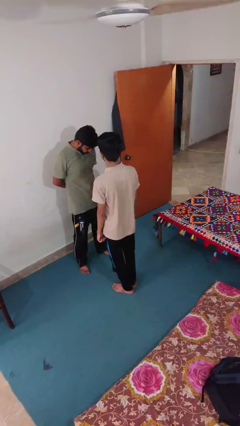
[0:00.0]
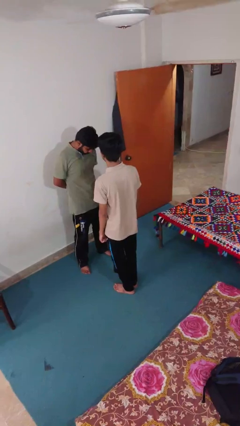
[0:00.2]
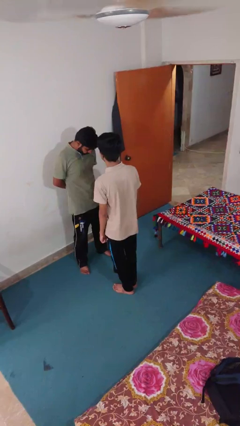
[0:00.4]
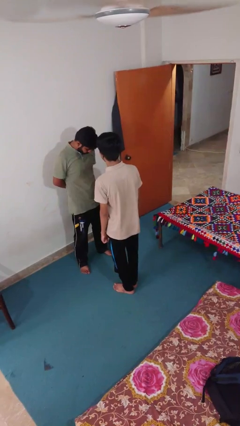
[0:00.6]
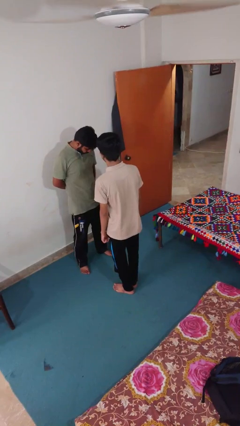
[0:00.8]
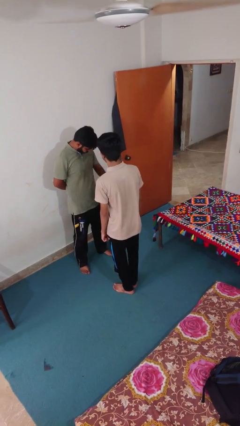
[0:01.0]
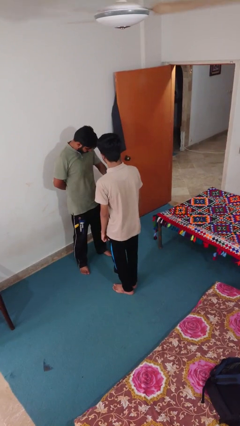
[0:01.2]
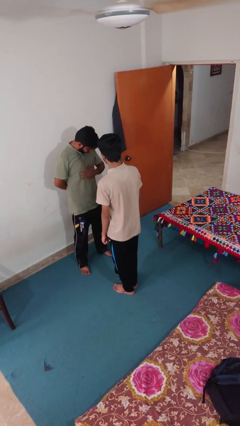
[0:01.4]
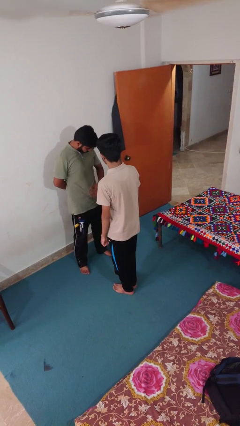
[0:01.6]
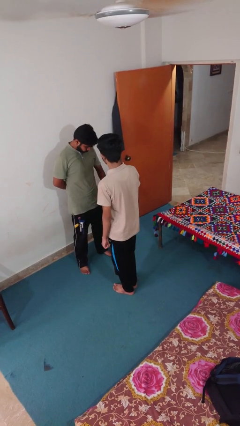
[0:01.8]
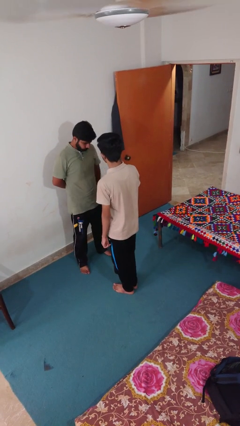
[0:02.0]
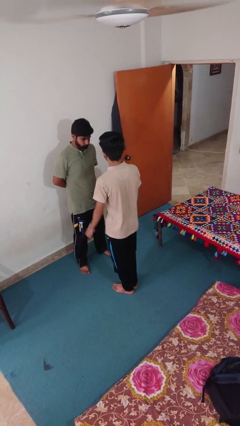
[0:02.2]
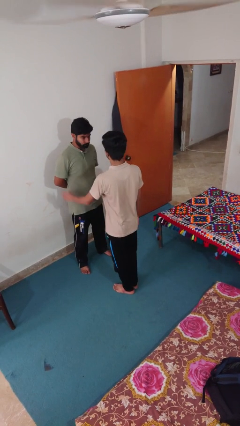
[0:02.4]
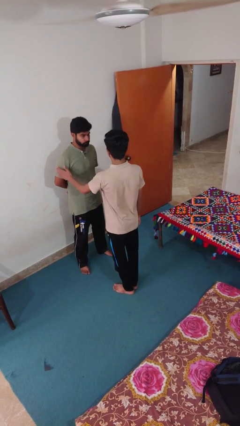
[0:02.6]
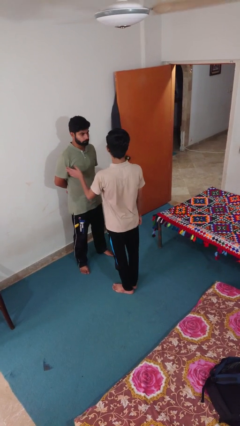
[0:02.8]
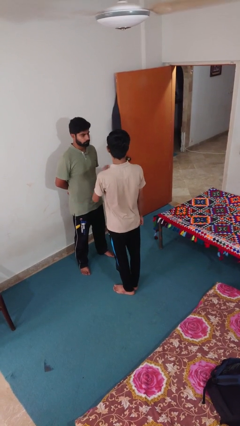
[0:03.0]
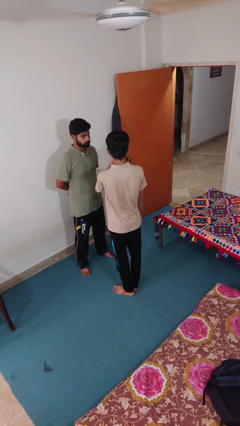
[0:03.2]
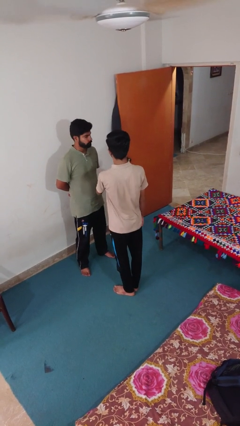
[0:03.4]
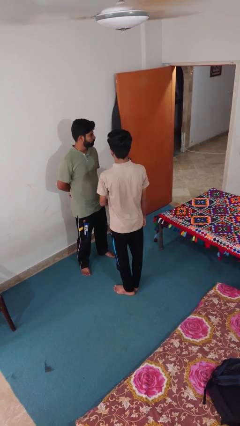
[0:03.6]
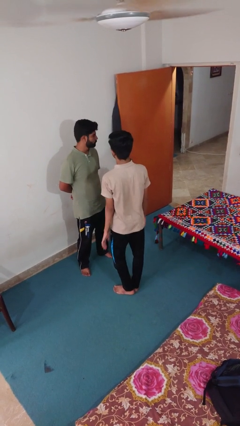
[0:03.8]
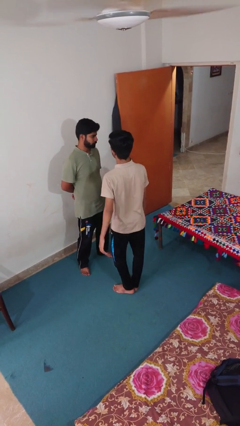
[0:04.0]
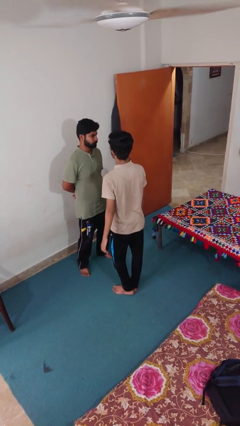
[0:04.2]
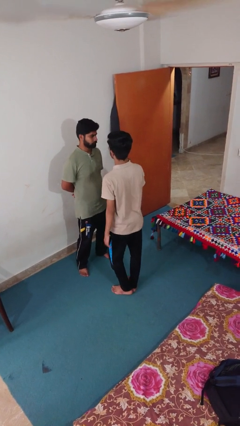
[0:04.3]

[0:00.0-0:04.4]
person shoves person

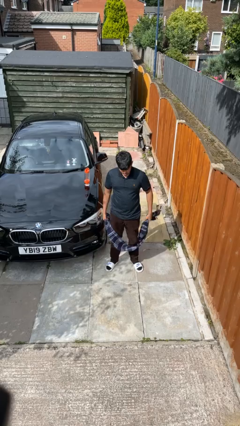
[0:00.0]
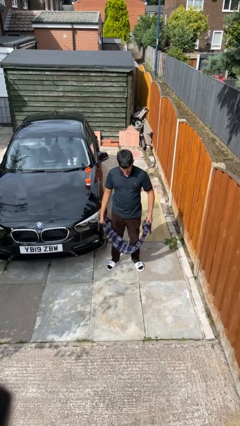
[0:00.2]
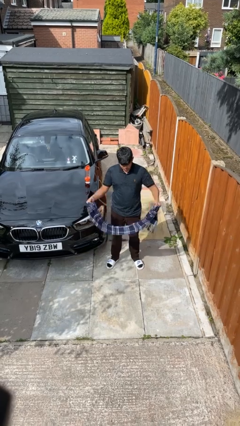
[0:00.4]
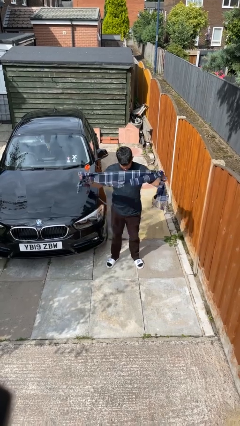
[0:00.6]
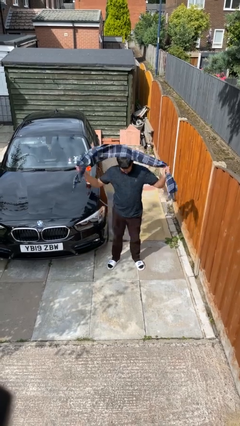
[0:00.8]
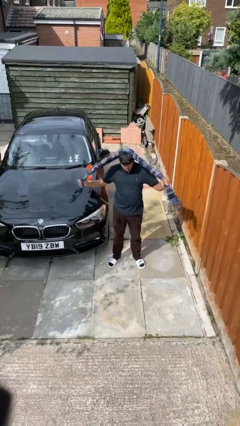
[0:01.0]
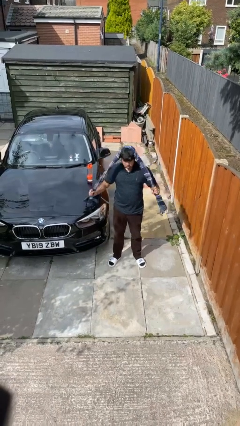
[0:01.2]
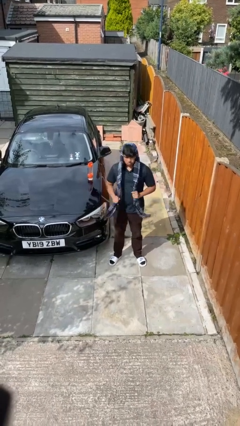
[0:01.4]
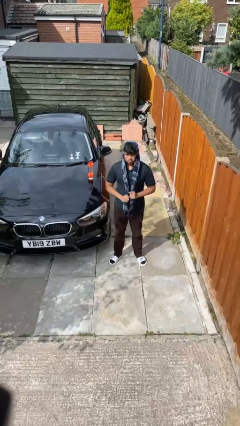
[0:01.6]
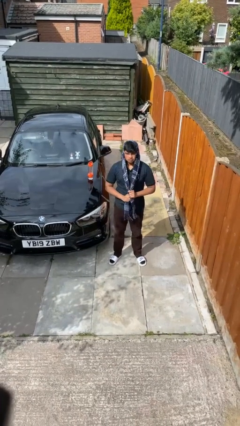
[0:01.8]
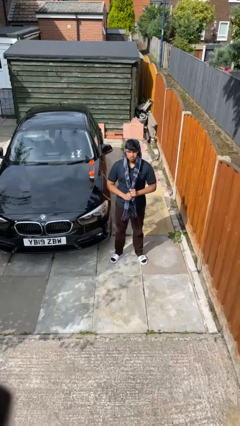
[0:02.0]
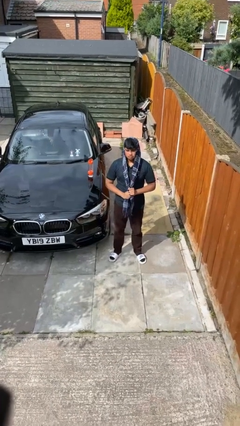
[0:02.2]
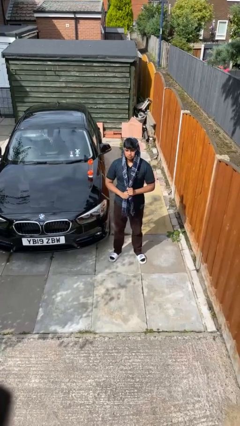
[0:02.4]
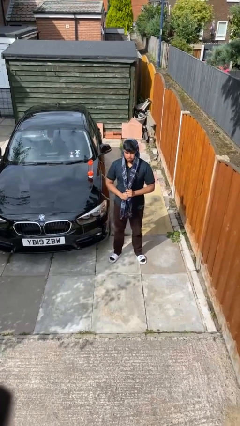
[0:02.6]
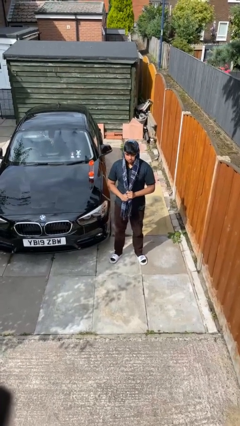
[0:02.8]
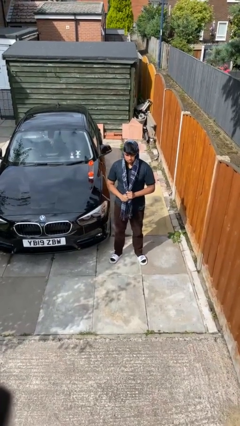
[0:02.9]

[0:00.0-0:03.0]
person puts on scarf

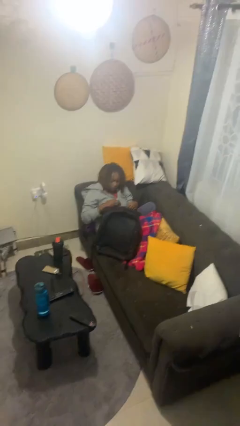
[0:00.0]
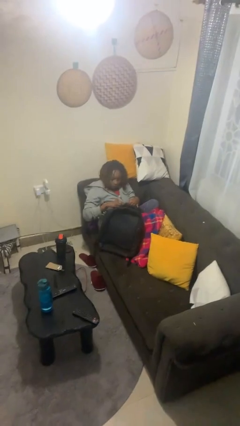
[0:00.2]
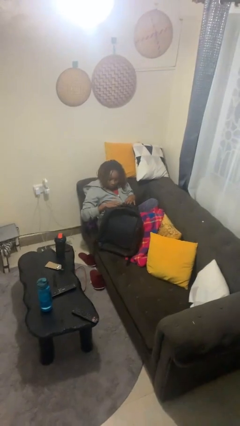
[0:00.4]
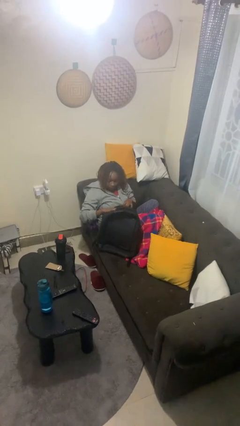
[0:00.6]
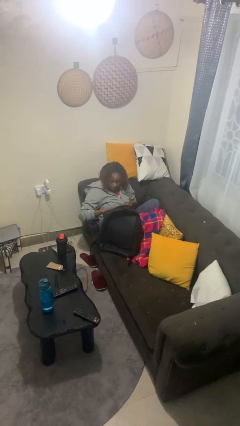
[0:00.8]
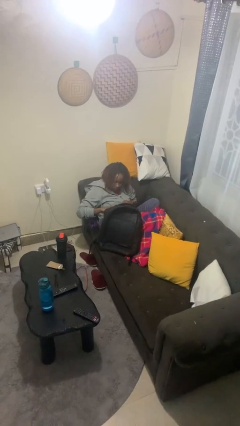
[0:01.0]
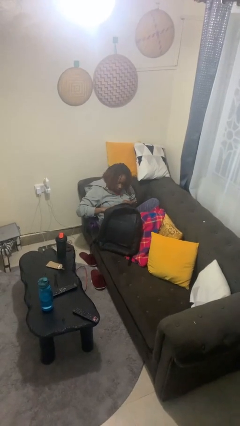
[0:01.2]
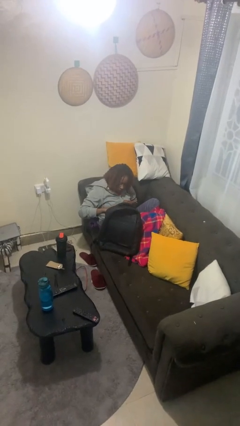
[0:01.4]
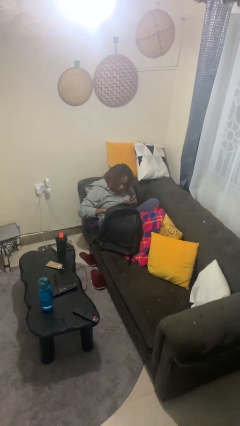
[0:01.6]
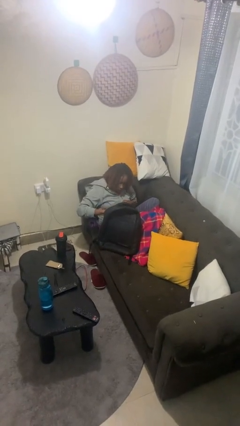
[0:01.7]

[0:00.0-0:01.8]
person searches in backpack

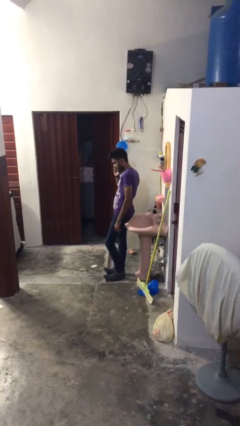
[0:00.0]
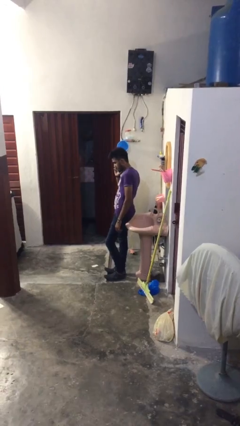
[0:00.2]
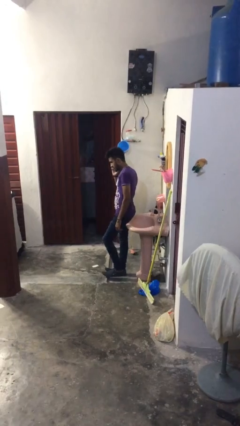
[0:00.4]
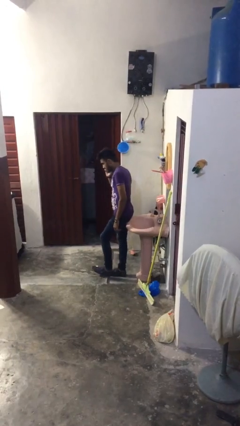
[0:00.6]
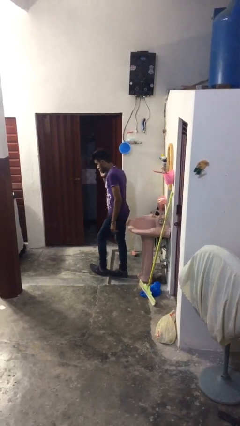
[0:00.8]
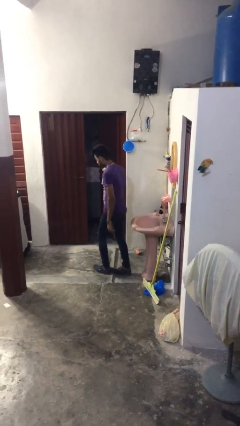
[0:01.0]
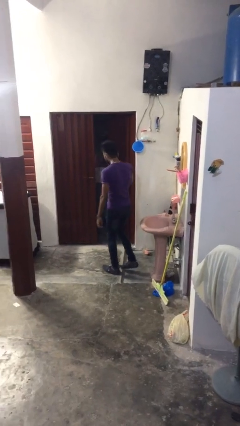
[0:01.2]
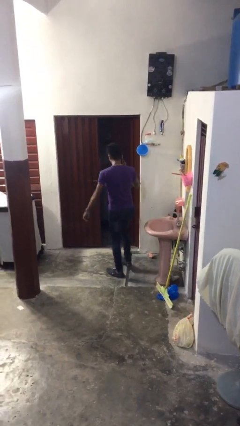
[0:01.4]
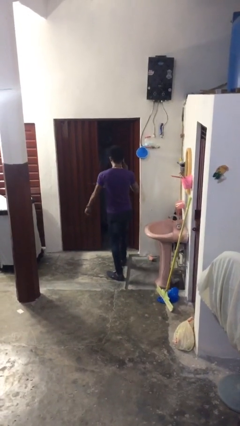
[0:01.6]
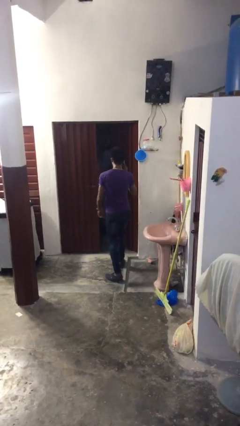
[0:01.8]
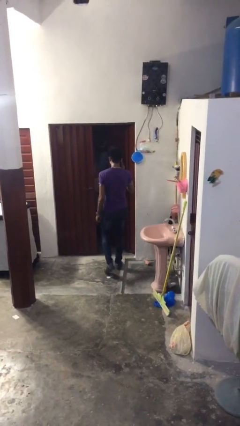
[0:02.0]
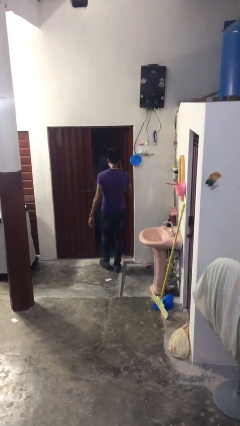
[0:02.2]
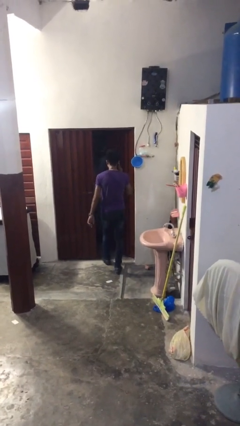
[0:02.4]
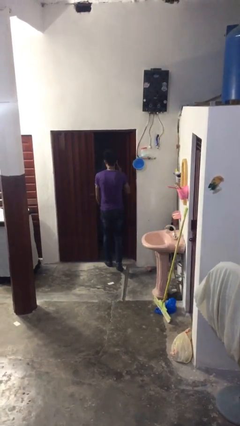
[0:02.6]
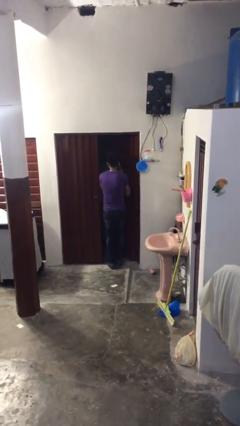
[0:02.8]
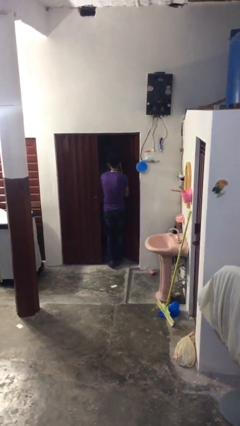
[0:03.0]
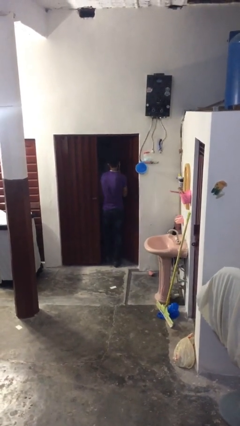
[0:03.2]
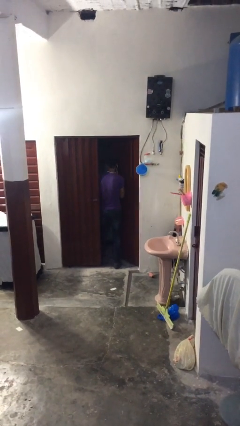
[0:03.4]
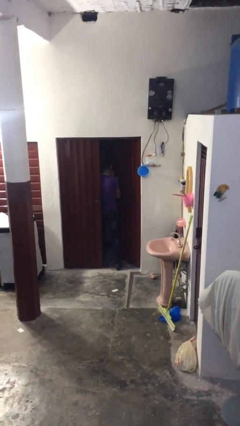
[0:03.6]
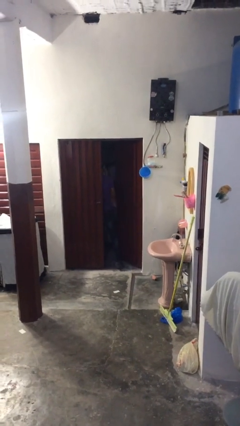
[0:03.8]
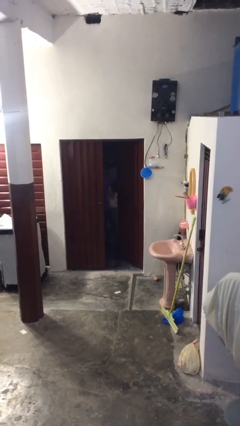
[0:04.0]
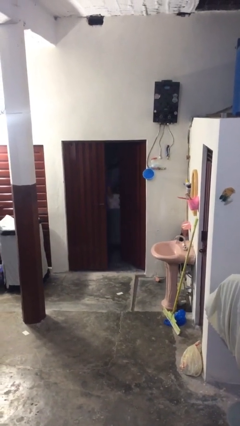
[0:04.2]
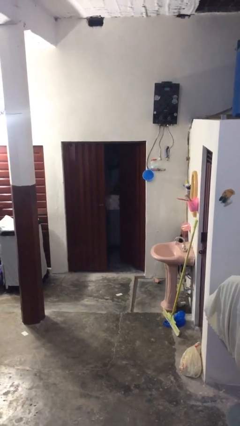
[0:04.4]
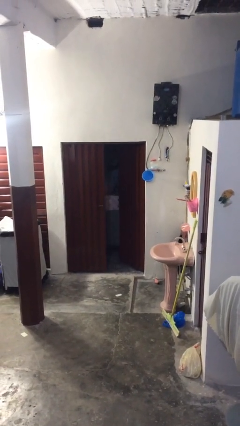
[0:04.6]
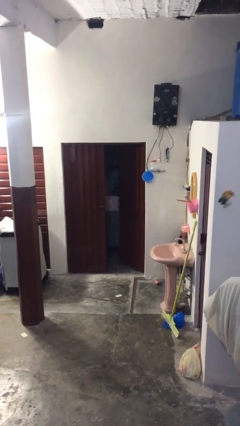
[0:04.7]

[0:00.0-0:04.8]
person exits scene through structure

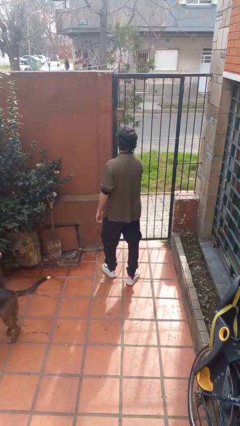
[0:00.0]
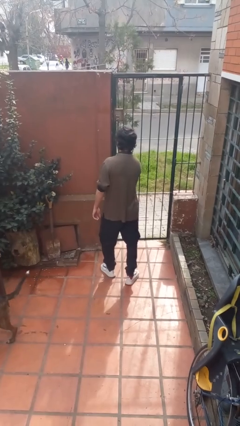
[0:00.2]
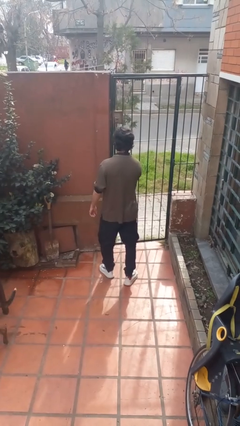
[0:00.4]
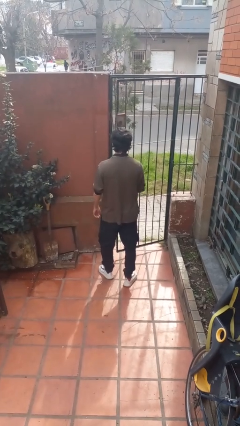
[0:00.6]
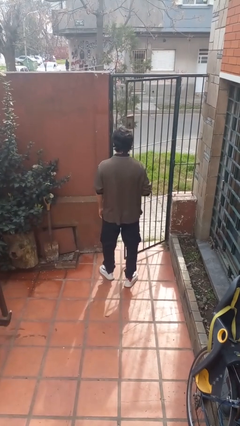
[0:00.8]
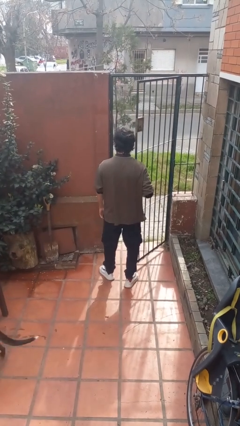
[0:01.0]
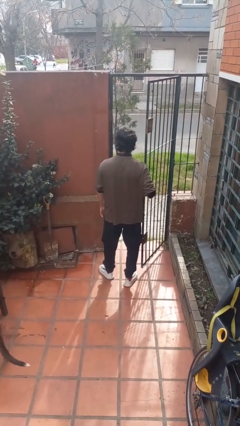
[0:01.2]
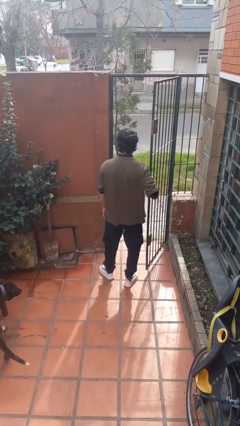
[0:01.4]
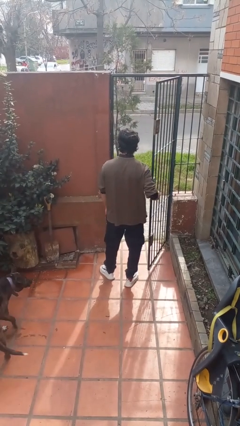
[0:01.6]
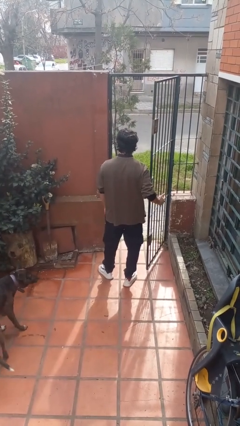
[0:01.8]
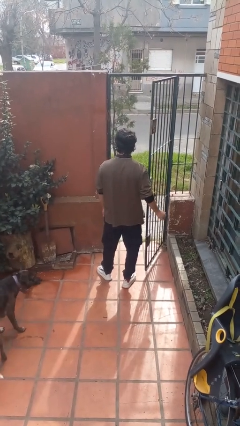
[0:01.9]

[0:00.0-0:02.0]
person opens gate

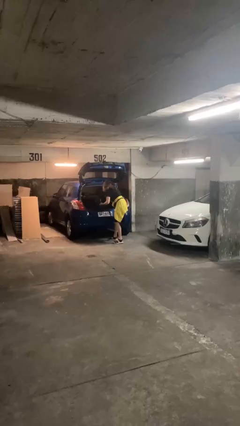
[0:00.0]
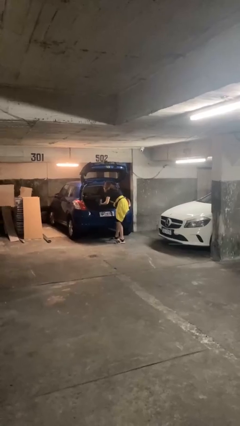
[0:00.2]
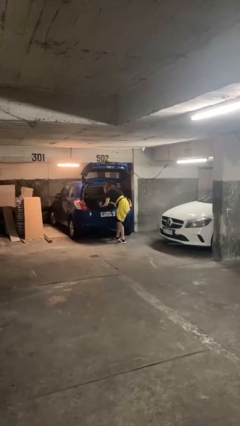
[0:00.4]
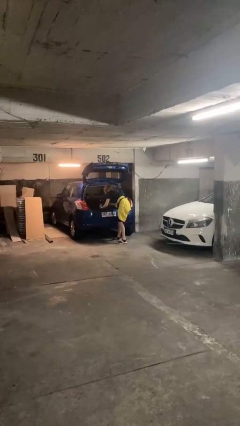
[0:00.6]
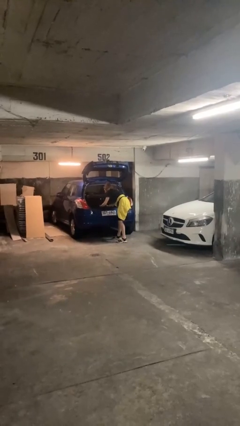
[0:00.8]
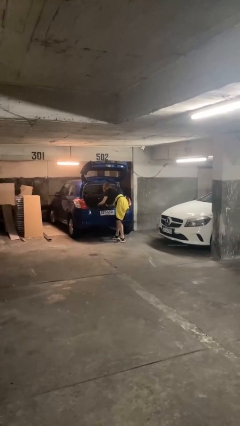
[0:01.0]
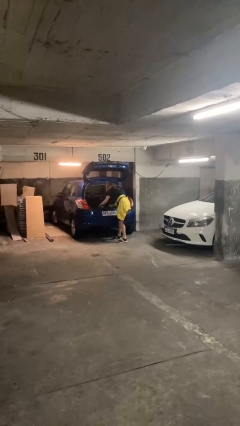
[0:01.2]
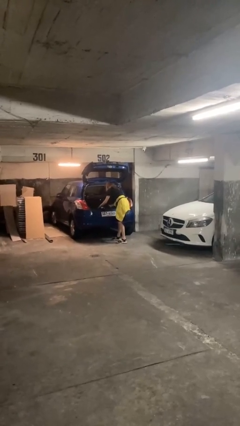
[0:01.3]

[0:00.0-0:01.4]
person loads car
